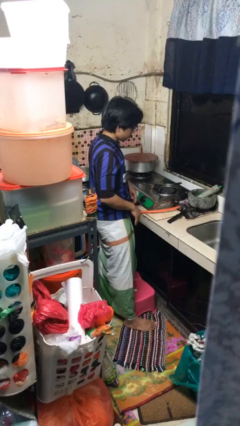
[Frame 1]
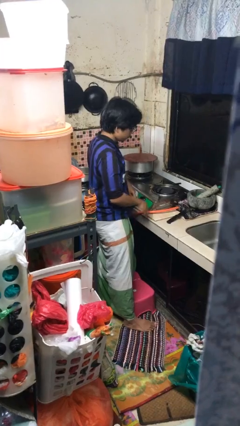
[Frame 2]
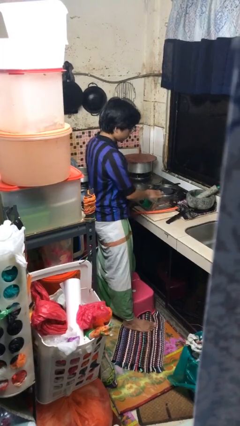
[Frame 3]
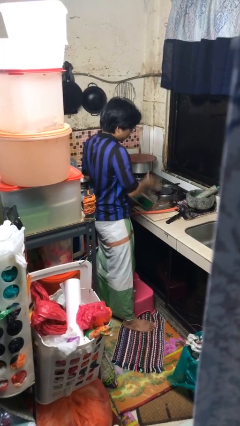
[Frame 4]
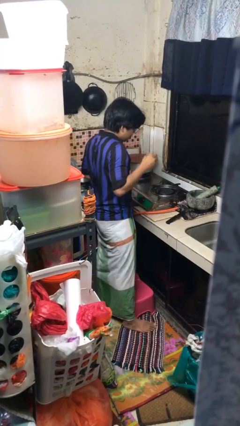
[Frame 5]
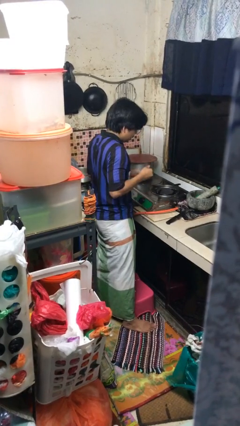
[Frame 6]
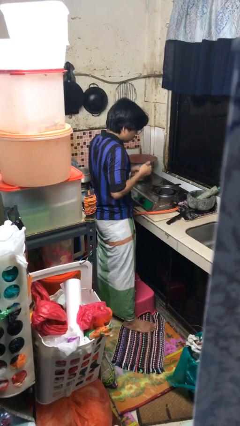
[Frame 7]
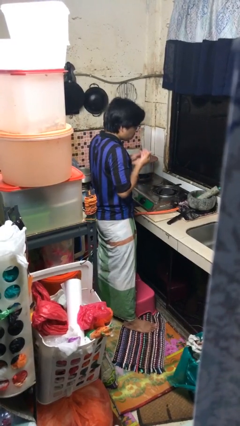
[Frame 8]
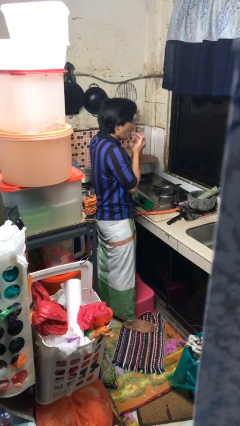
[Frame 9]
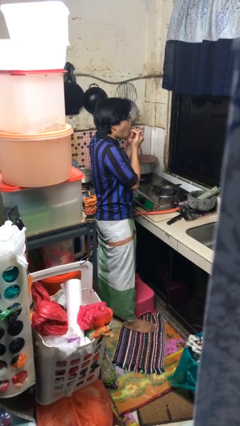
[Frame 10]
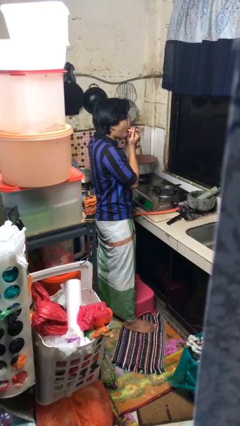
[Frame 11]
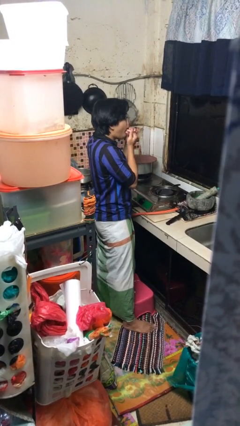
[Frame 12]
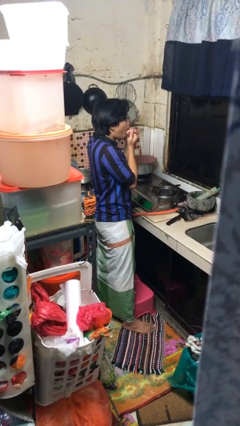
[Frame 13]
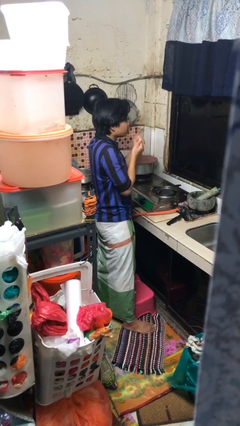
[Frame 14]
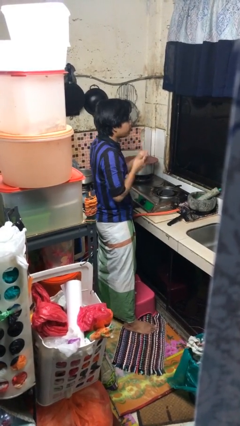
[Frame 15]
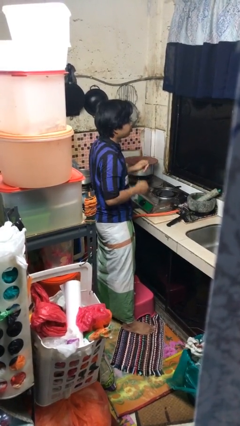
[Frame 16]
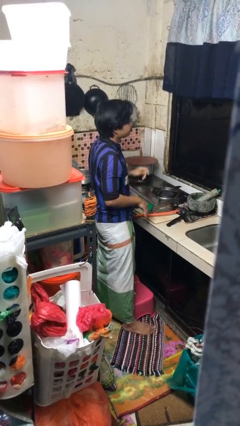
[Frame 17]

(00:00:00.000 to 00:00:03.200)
person burns hand

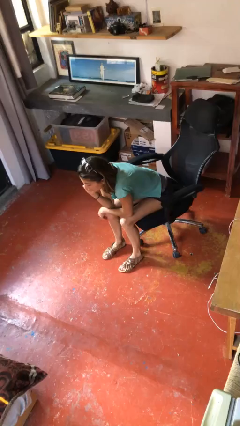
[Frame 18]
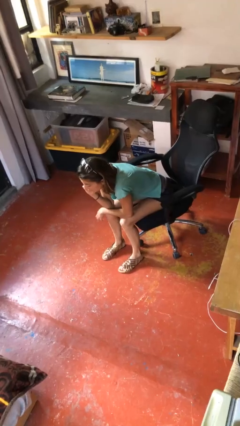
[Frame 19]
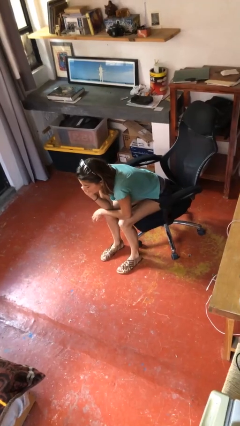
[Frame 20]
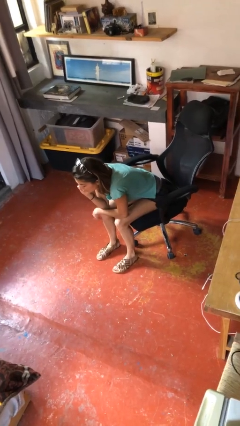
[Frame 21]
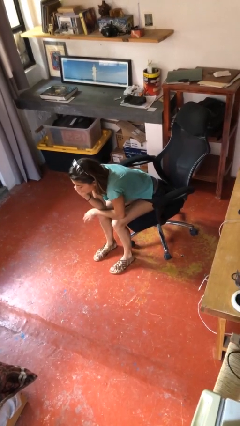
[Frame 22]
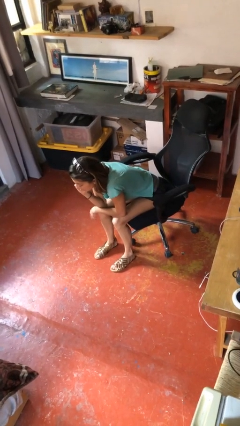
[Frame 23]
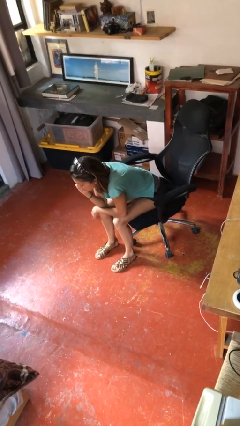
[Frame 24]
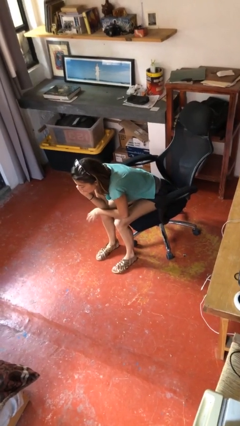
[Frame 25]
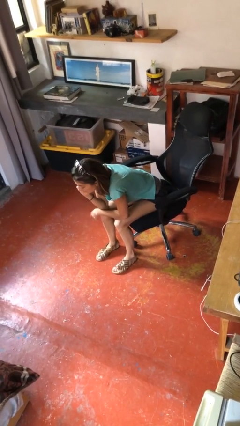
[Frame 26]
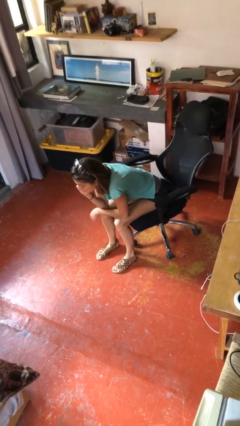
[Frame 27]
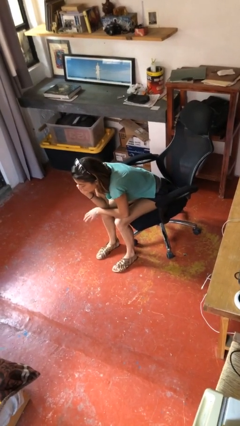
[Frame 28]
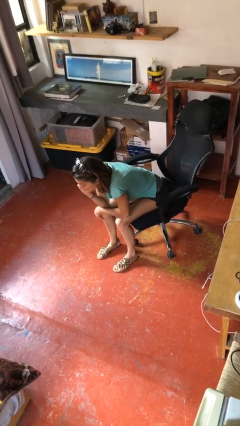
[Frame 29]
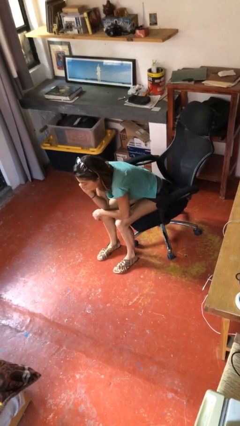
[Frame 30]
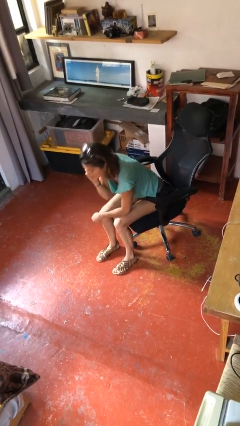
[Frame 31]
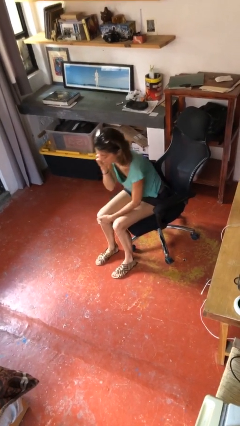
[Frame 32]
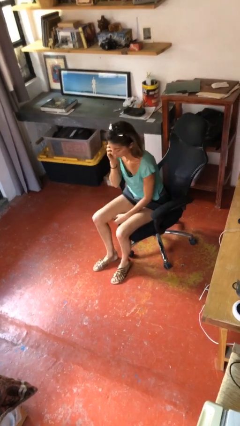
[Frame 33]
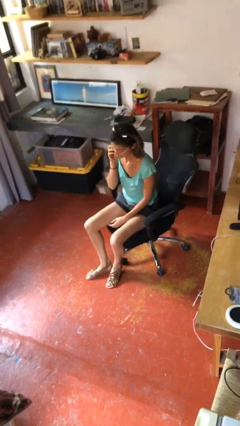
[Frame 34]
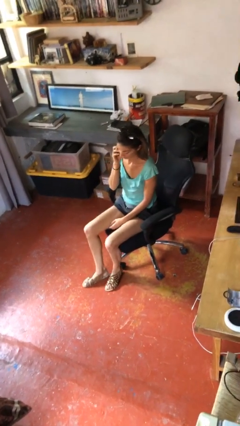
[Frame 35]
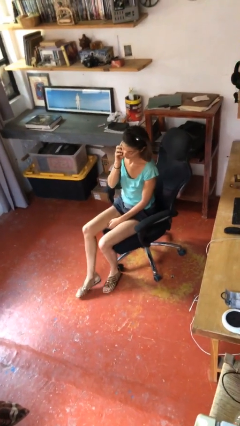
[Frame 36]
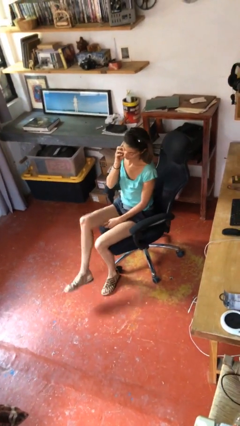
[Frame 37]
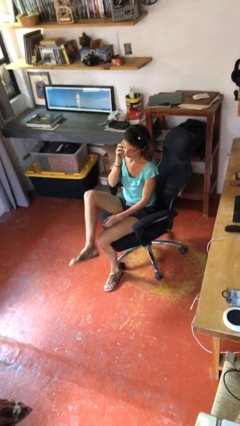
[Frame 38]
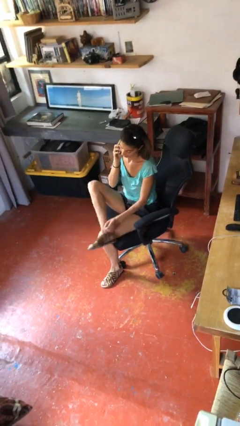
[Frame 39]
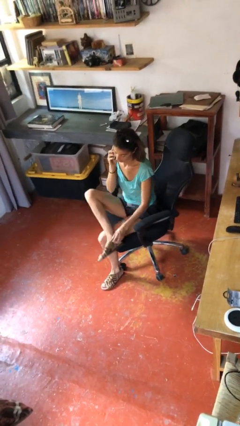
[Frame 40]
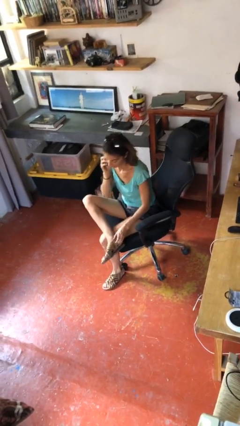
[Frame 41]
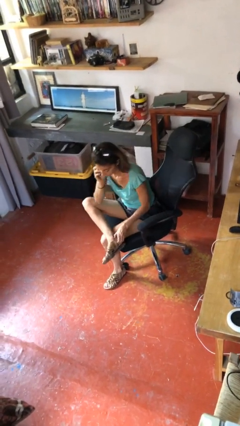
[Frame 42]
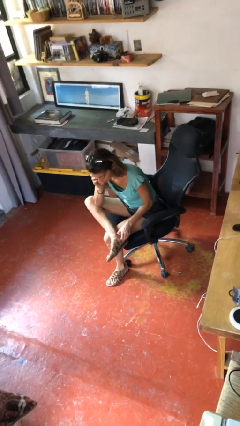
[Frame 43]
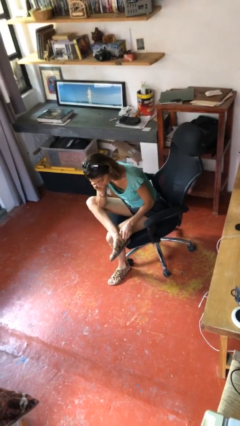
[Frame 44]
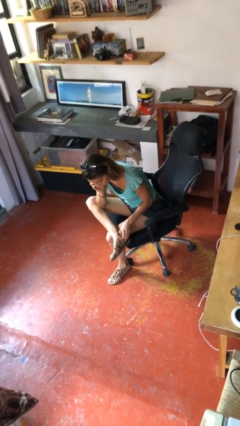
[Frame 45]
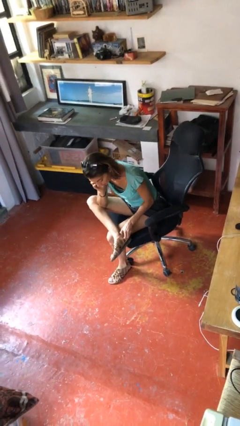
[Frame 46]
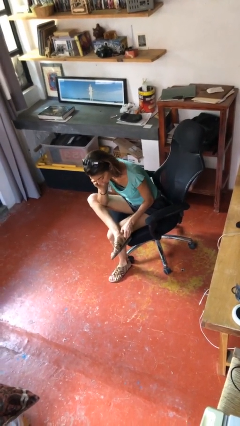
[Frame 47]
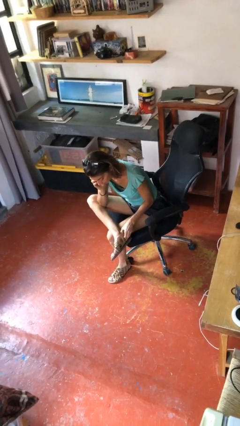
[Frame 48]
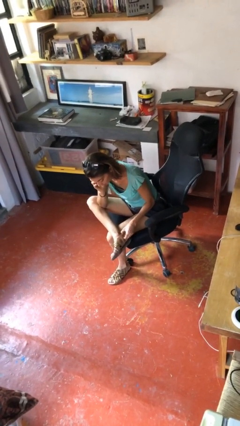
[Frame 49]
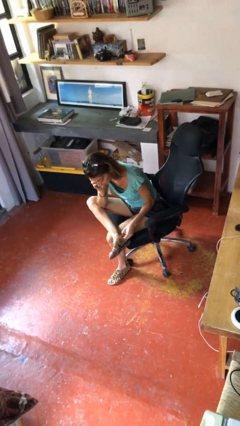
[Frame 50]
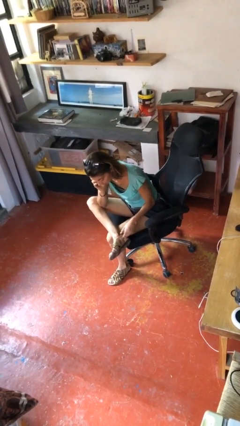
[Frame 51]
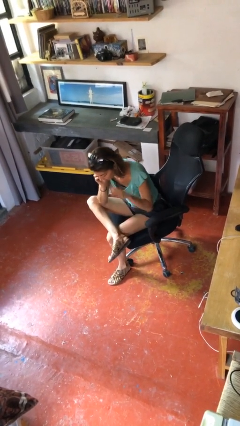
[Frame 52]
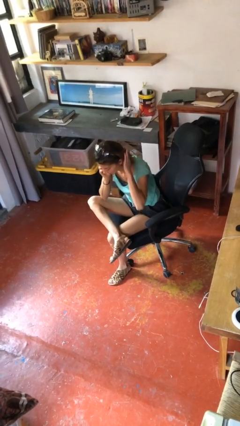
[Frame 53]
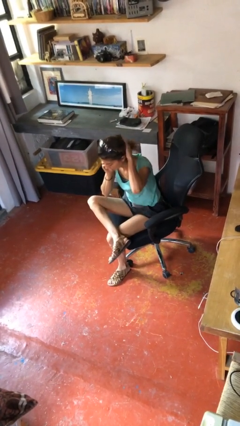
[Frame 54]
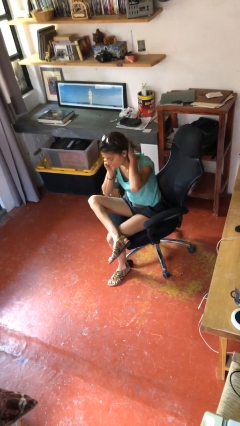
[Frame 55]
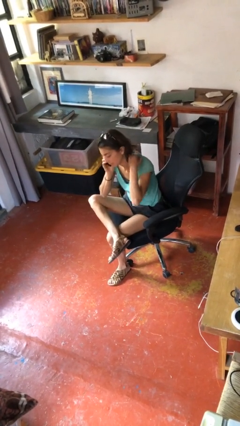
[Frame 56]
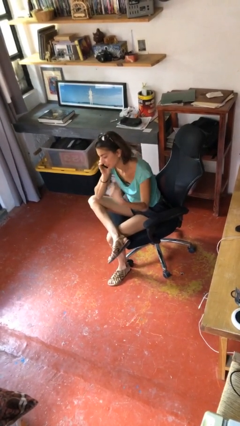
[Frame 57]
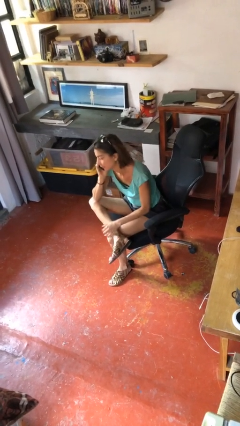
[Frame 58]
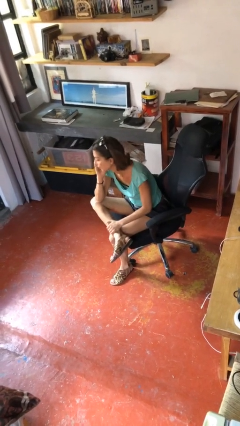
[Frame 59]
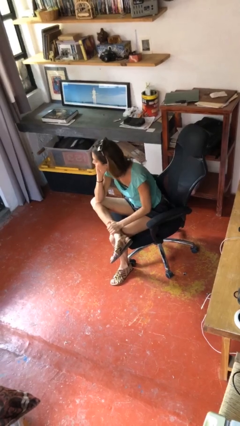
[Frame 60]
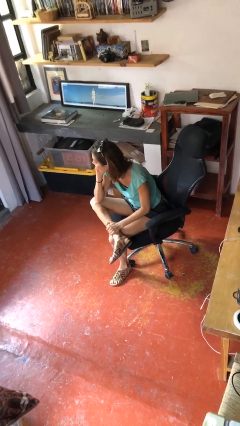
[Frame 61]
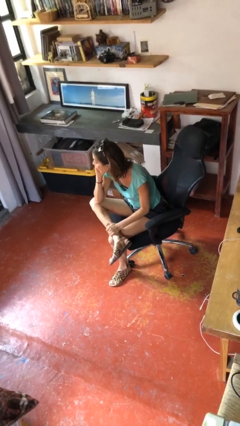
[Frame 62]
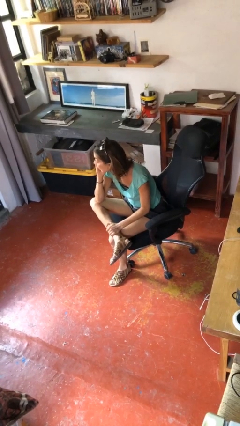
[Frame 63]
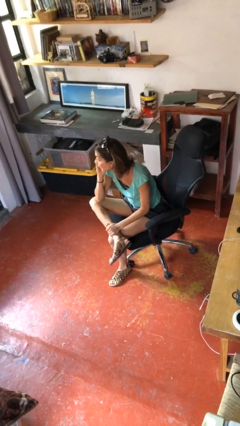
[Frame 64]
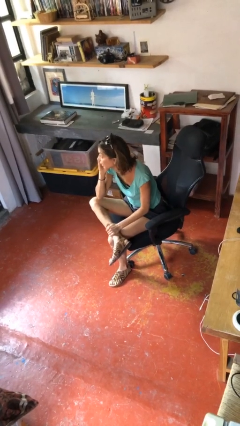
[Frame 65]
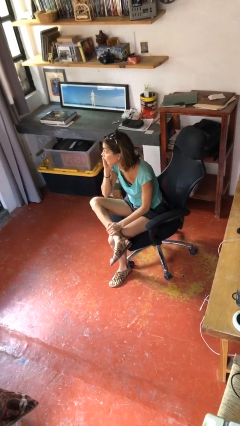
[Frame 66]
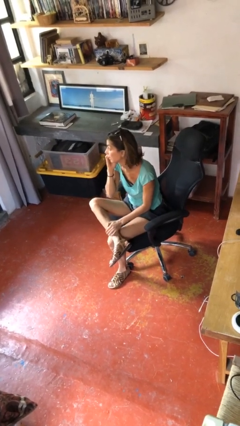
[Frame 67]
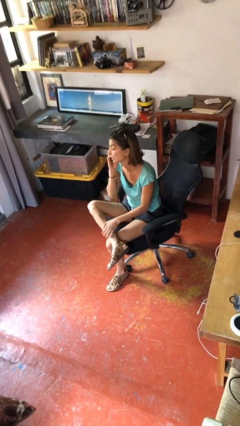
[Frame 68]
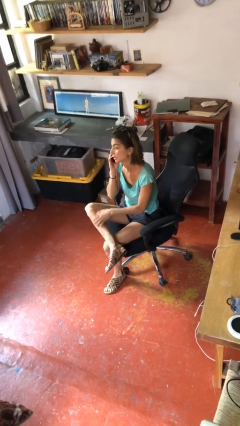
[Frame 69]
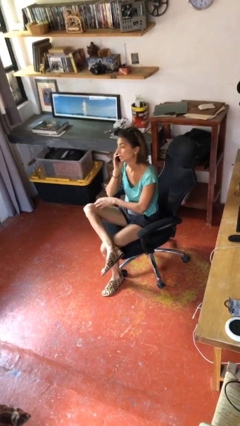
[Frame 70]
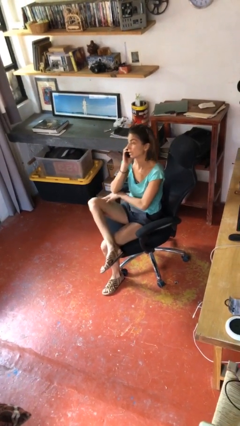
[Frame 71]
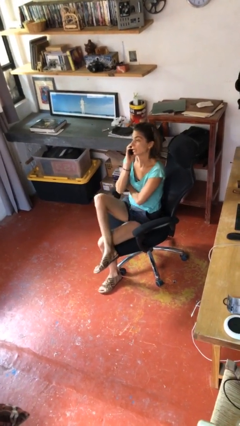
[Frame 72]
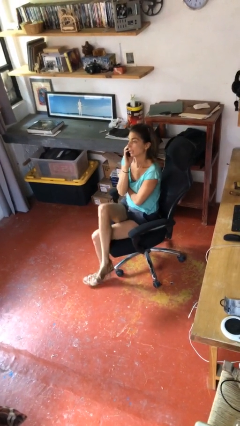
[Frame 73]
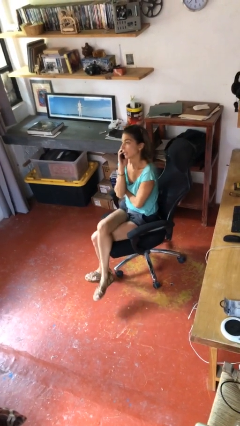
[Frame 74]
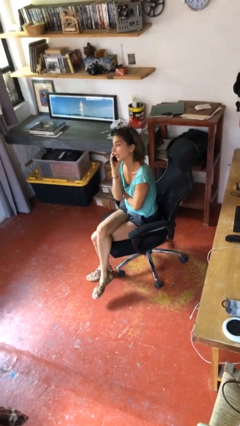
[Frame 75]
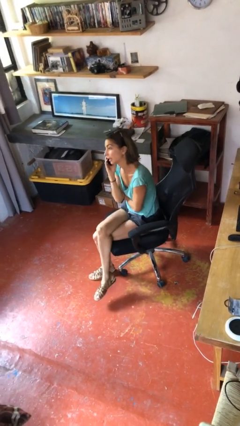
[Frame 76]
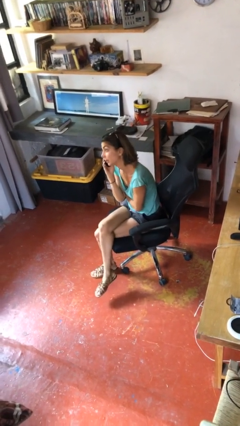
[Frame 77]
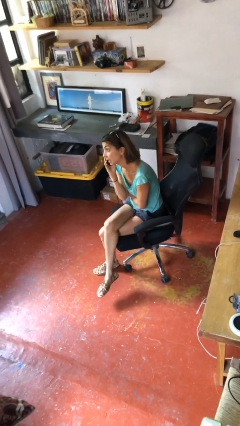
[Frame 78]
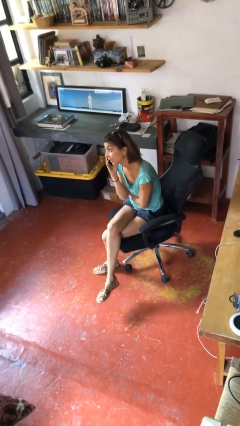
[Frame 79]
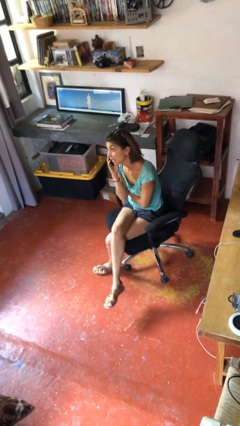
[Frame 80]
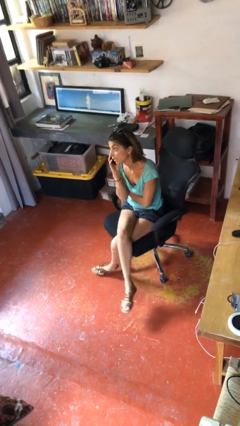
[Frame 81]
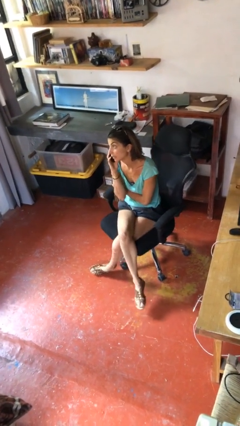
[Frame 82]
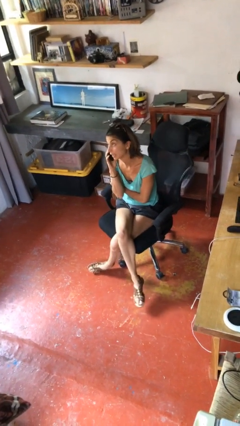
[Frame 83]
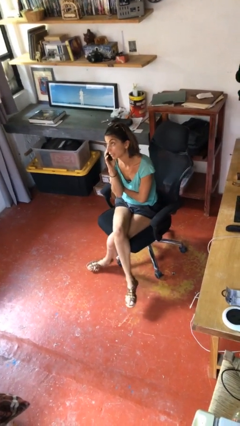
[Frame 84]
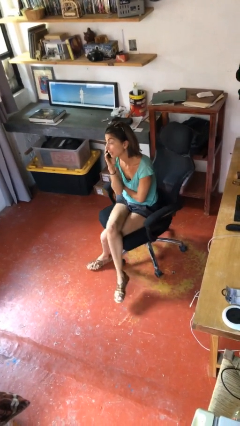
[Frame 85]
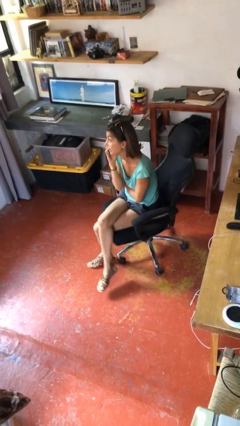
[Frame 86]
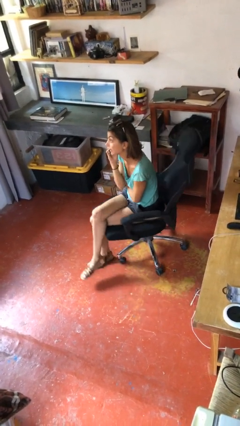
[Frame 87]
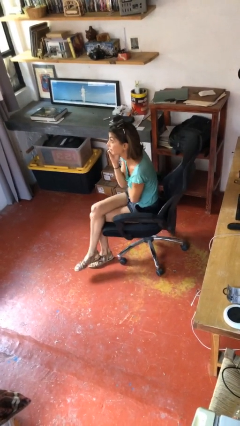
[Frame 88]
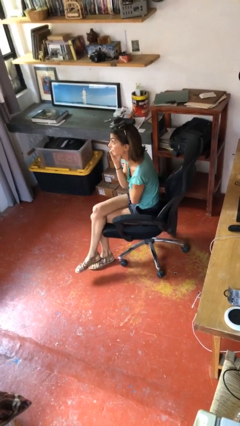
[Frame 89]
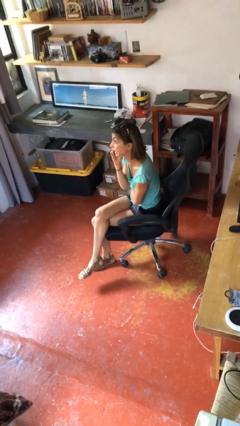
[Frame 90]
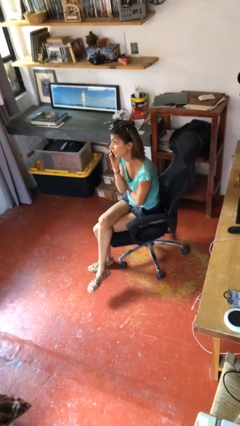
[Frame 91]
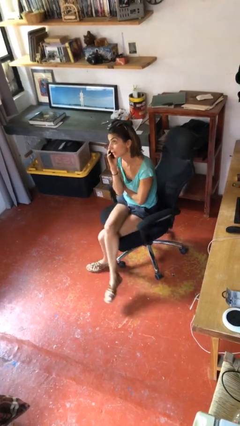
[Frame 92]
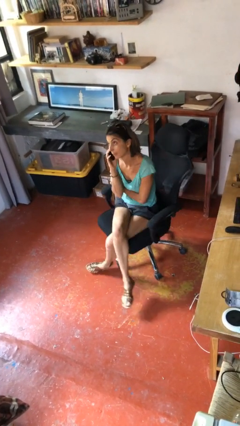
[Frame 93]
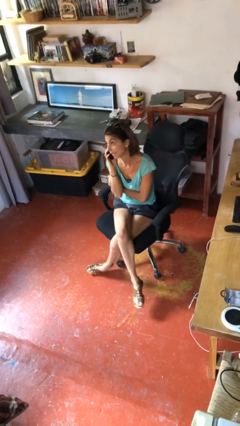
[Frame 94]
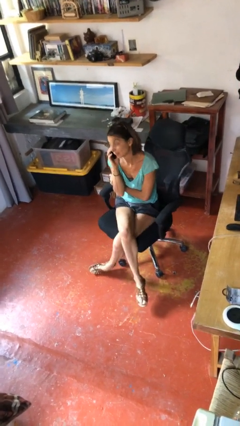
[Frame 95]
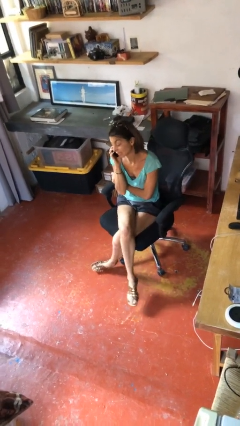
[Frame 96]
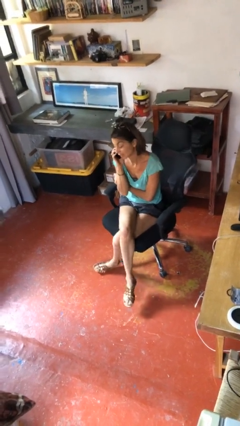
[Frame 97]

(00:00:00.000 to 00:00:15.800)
person talks on phone
